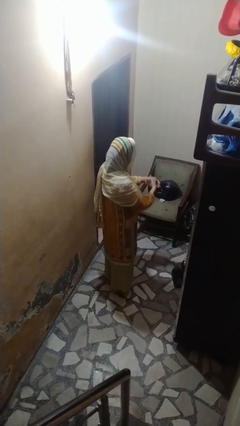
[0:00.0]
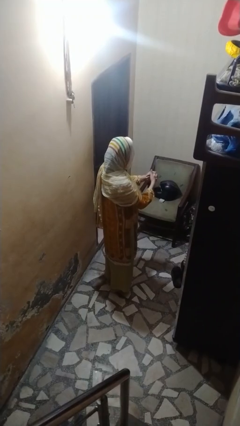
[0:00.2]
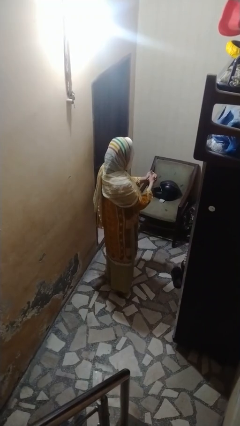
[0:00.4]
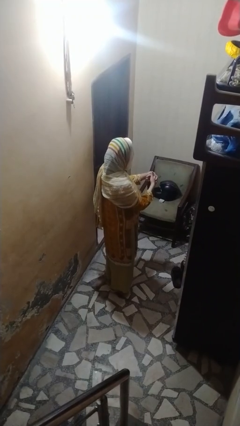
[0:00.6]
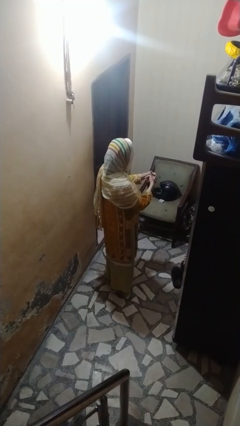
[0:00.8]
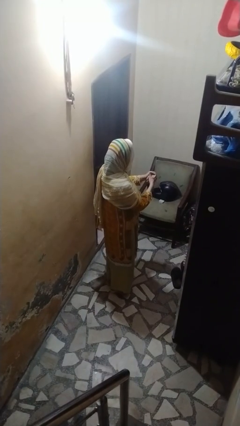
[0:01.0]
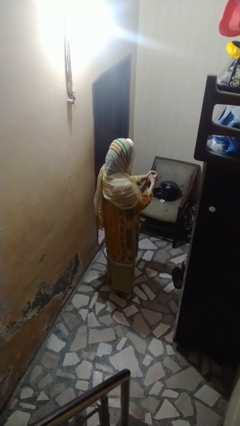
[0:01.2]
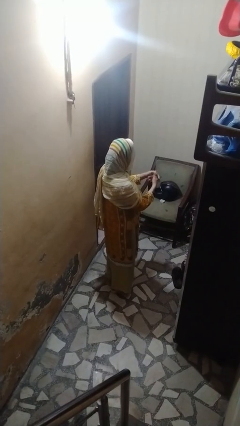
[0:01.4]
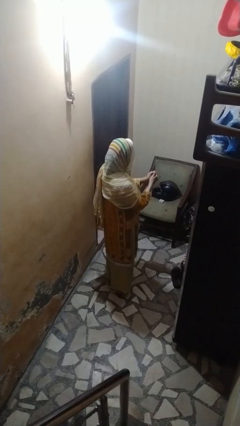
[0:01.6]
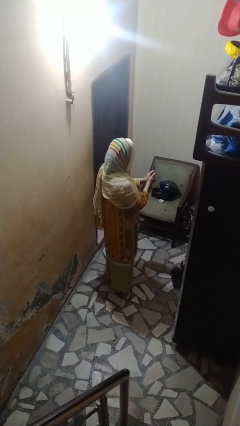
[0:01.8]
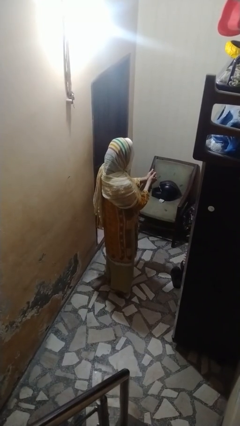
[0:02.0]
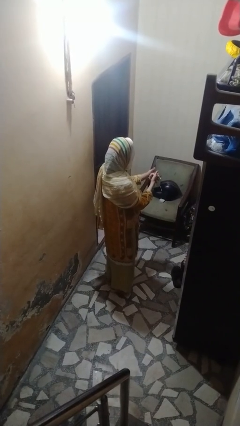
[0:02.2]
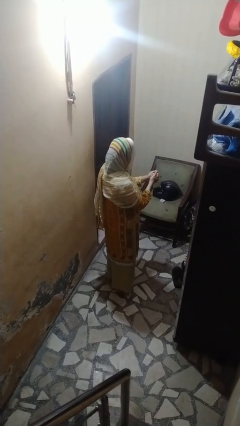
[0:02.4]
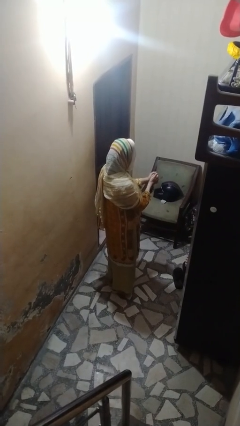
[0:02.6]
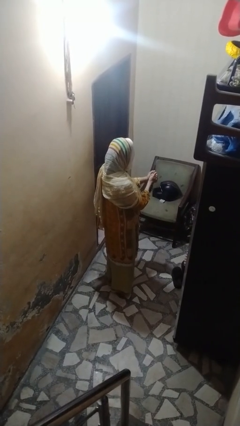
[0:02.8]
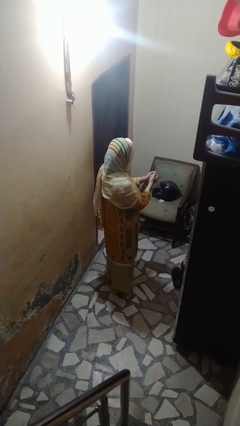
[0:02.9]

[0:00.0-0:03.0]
person cracks knuckles

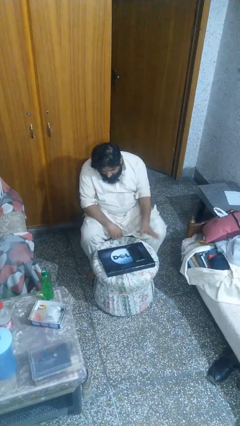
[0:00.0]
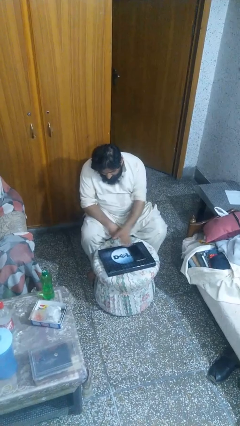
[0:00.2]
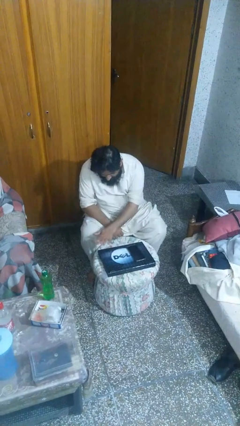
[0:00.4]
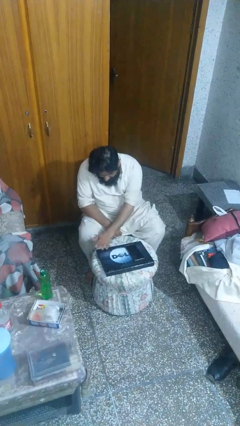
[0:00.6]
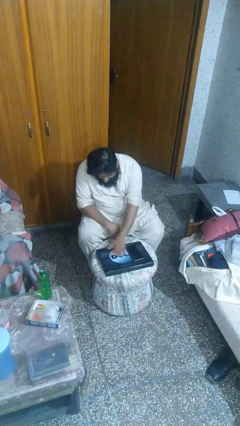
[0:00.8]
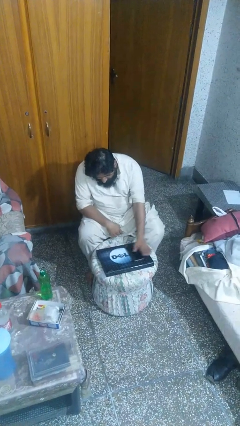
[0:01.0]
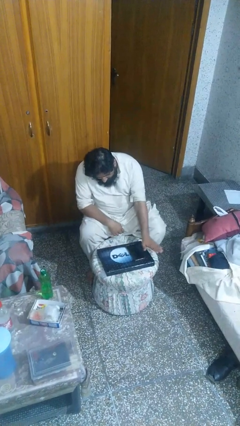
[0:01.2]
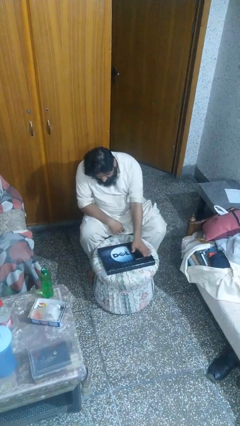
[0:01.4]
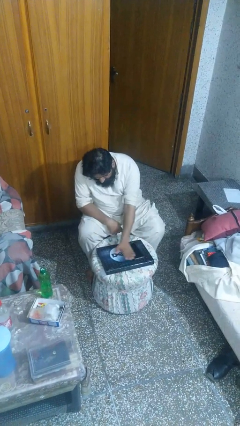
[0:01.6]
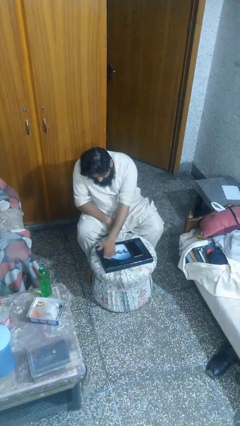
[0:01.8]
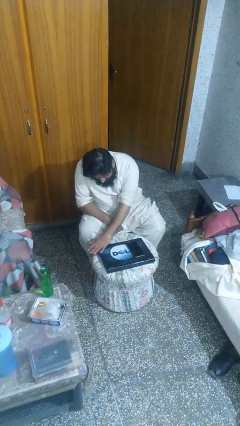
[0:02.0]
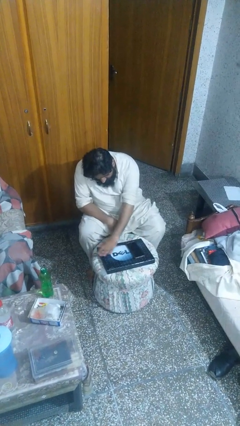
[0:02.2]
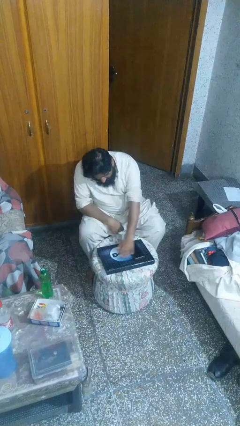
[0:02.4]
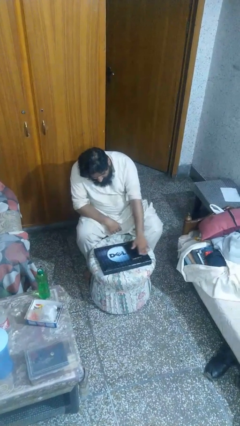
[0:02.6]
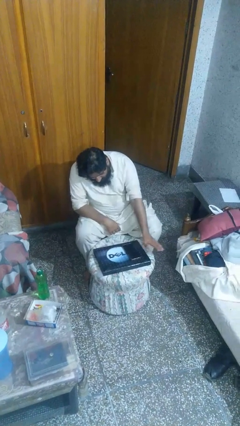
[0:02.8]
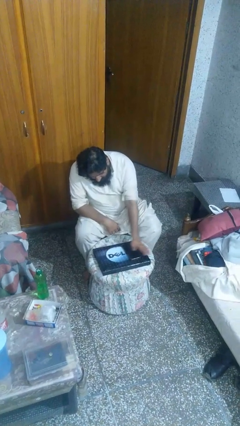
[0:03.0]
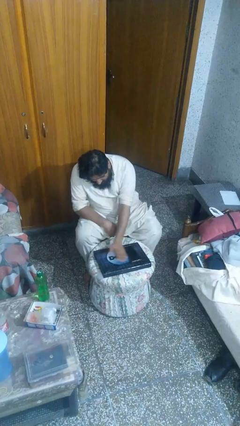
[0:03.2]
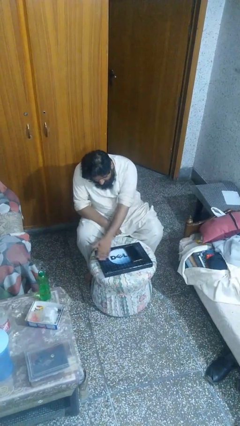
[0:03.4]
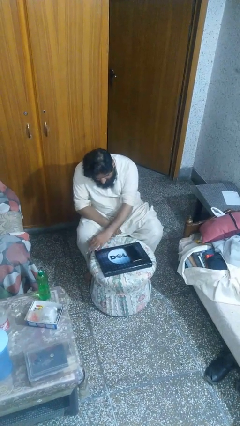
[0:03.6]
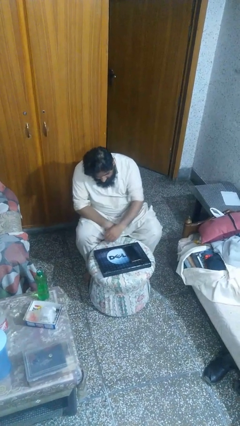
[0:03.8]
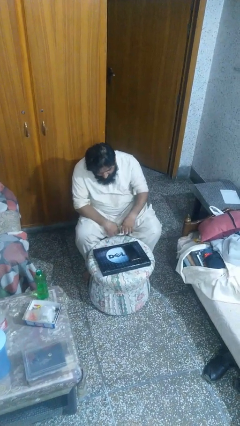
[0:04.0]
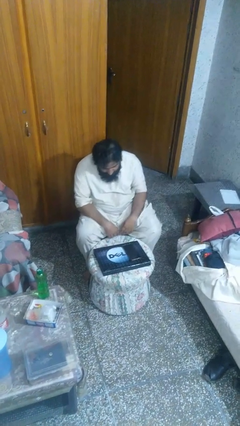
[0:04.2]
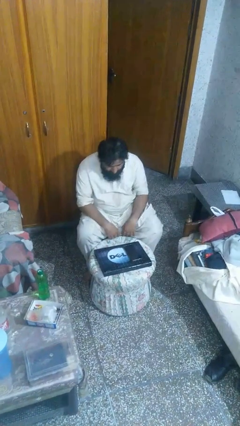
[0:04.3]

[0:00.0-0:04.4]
person waves hand over object

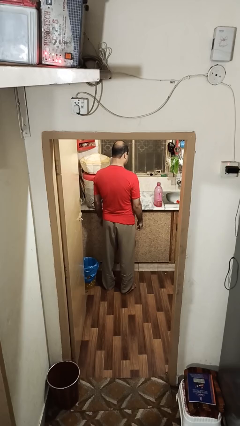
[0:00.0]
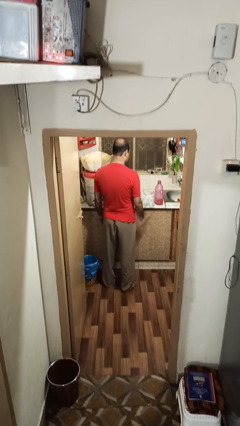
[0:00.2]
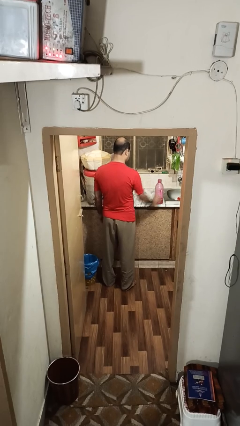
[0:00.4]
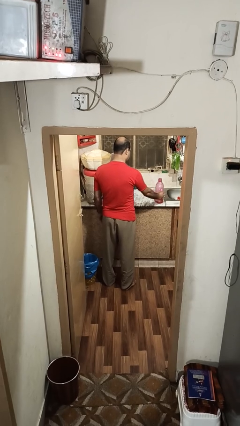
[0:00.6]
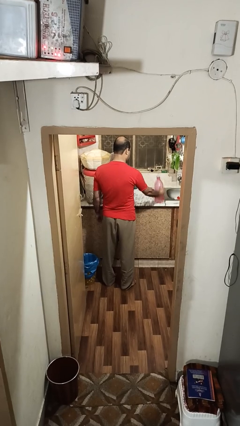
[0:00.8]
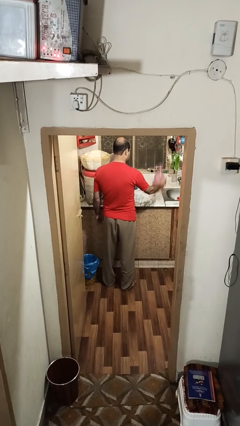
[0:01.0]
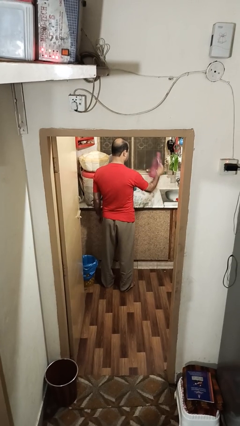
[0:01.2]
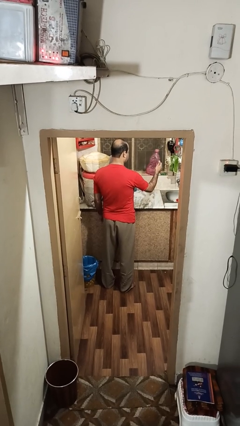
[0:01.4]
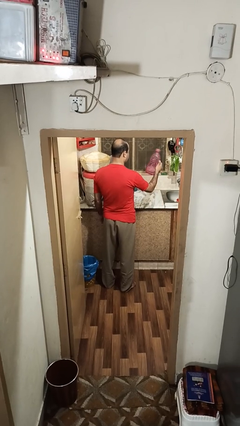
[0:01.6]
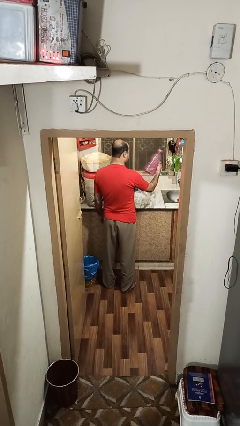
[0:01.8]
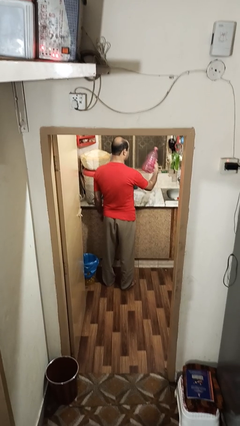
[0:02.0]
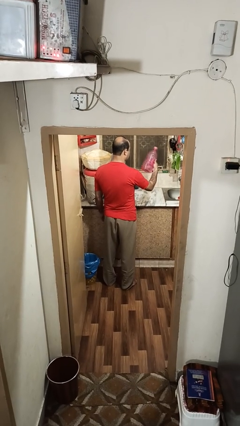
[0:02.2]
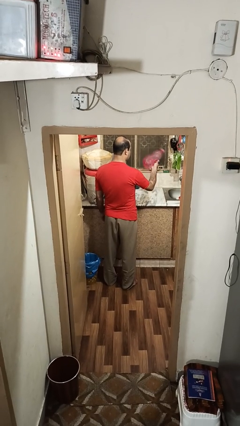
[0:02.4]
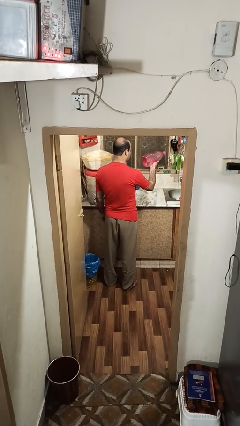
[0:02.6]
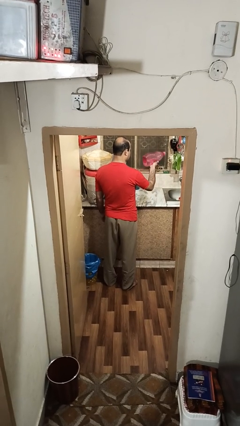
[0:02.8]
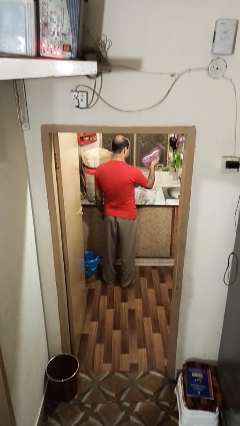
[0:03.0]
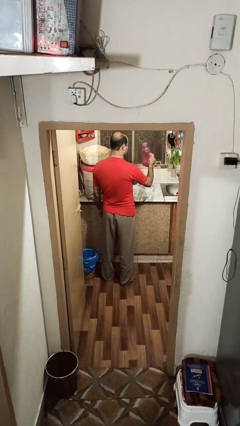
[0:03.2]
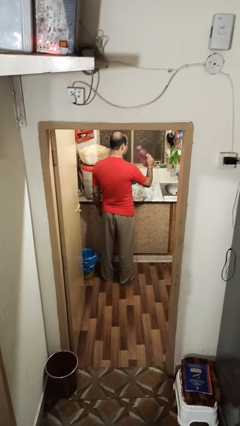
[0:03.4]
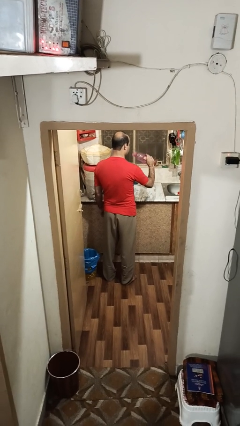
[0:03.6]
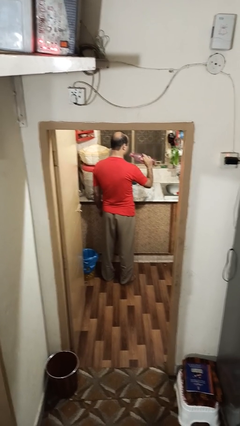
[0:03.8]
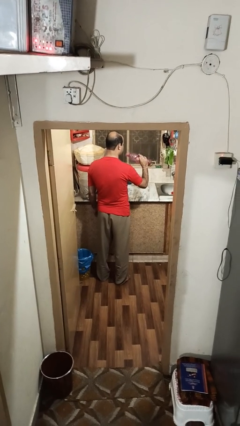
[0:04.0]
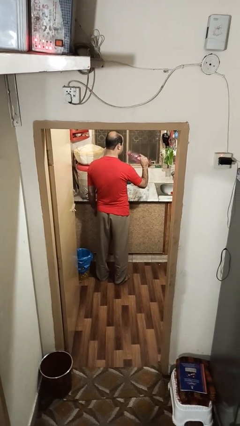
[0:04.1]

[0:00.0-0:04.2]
person picks up object from countertop

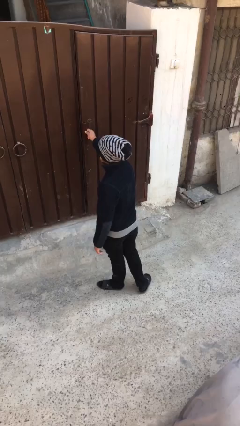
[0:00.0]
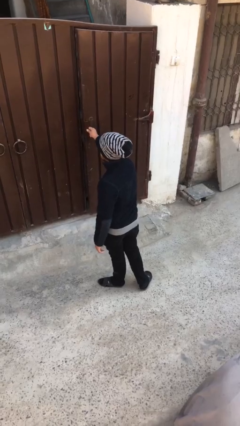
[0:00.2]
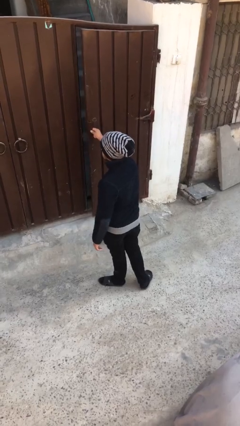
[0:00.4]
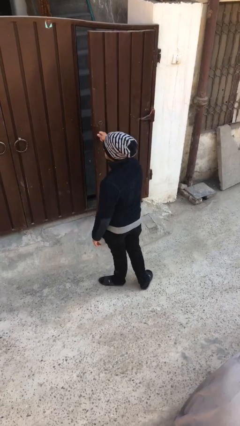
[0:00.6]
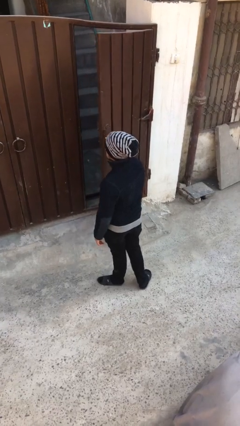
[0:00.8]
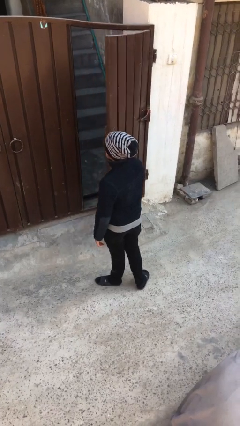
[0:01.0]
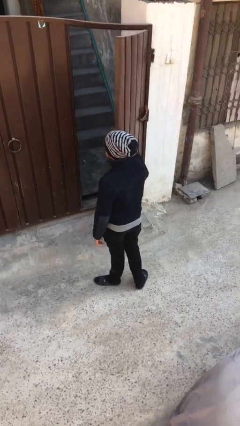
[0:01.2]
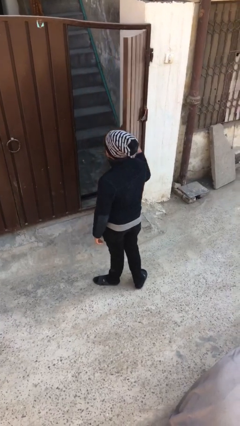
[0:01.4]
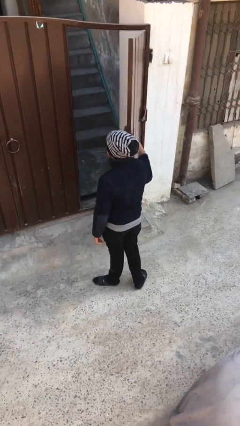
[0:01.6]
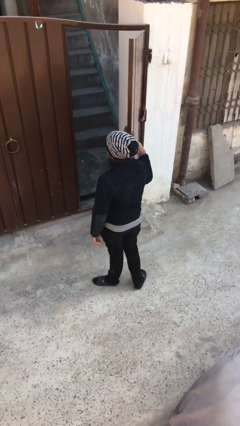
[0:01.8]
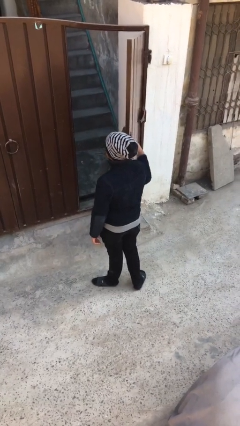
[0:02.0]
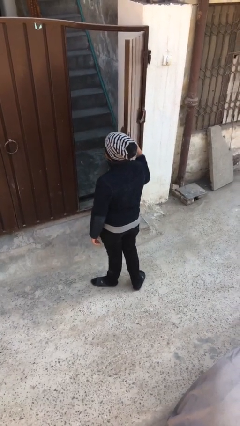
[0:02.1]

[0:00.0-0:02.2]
person opens facility door

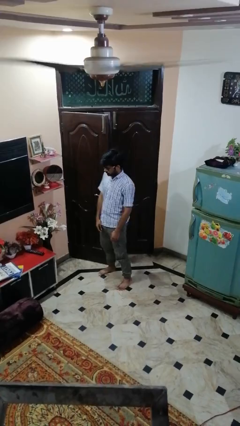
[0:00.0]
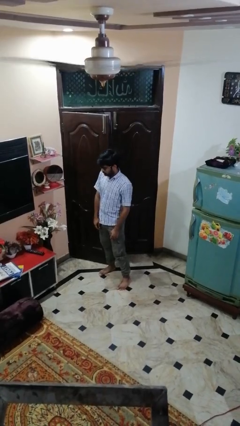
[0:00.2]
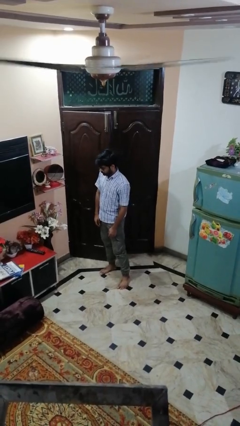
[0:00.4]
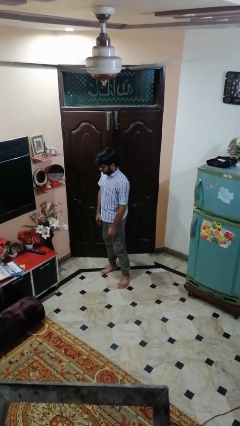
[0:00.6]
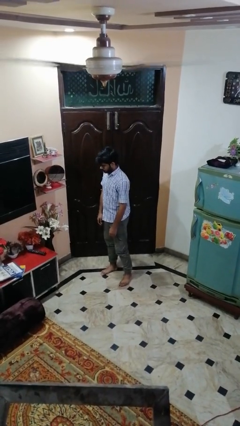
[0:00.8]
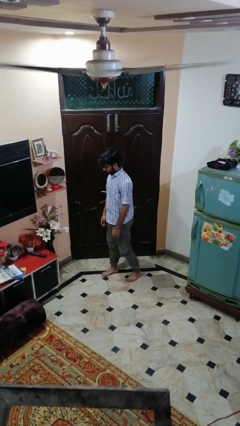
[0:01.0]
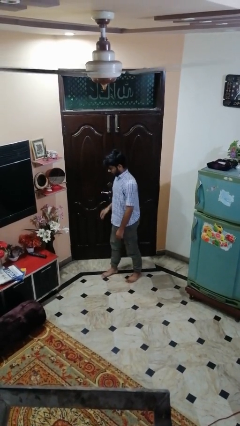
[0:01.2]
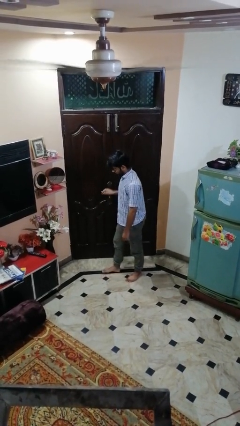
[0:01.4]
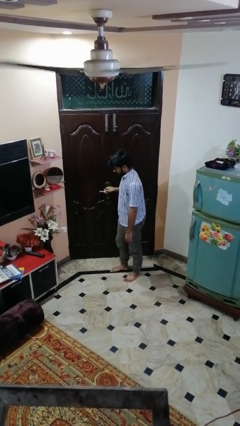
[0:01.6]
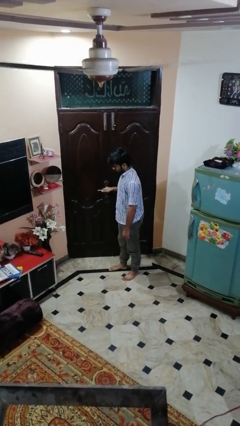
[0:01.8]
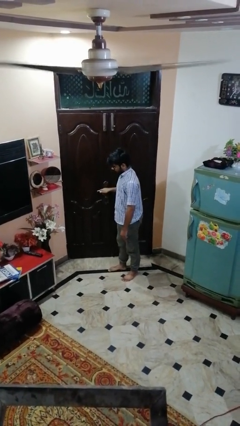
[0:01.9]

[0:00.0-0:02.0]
person closes door with hip

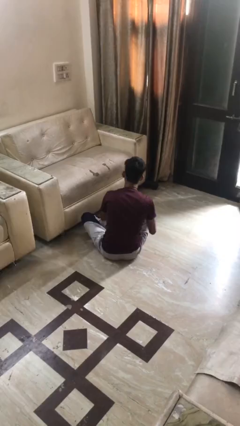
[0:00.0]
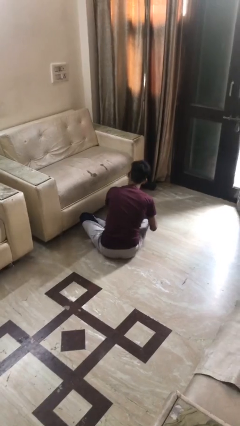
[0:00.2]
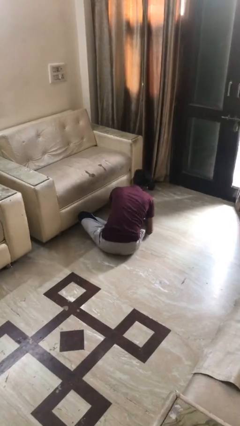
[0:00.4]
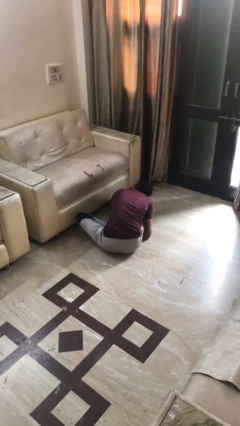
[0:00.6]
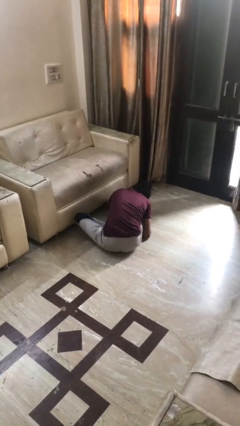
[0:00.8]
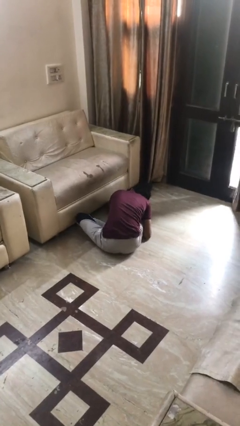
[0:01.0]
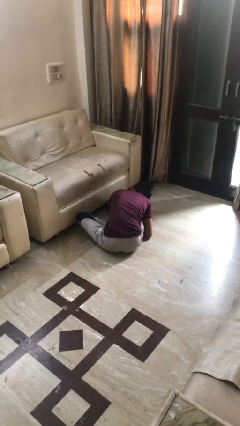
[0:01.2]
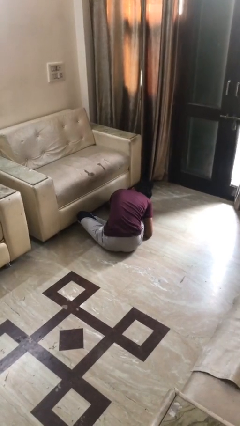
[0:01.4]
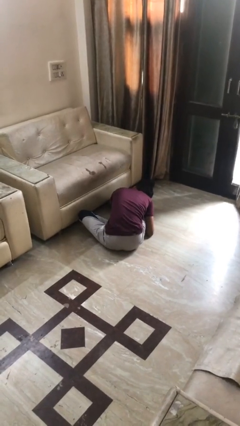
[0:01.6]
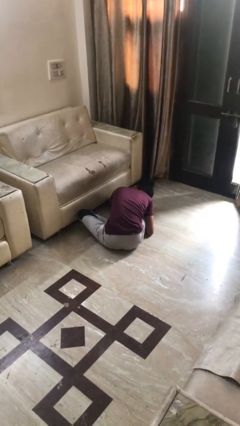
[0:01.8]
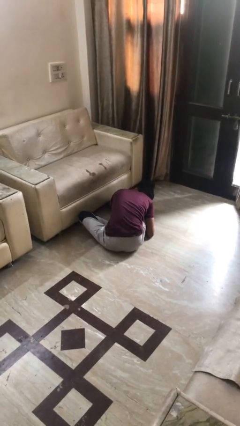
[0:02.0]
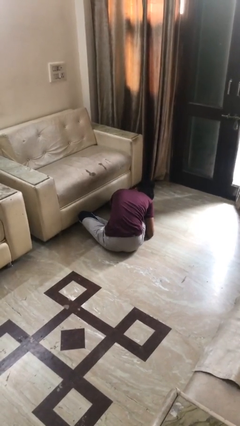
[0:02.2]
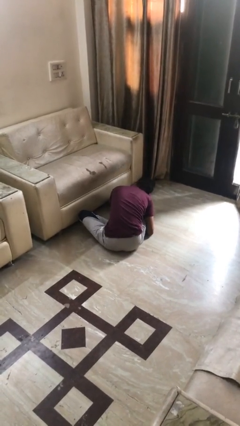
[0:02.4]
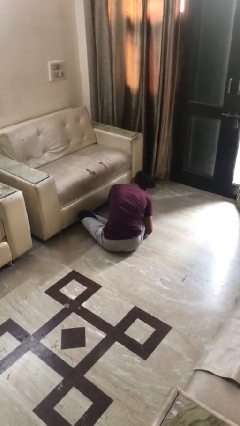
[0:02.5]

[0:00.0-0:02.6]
person searches under couch
